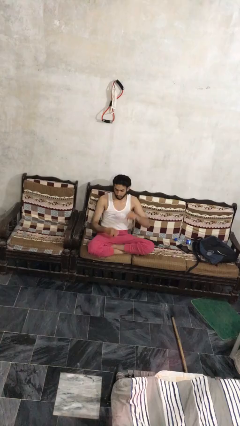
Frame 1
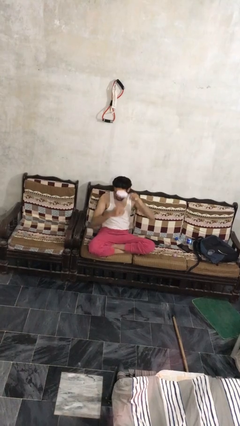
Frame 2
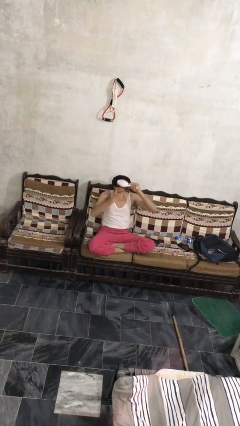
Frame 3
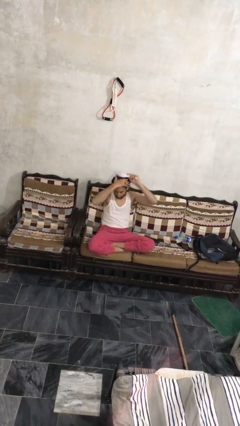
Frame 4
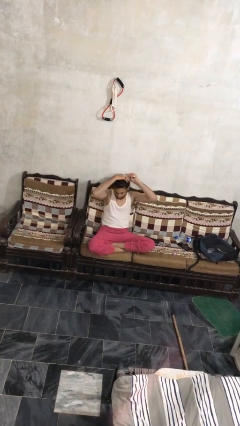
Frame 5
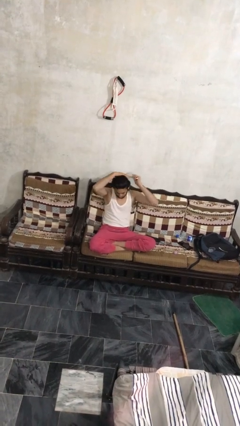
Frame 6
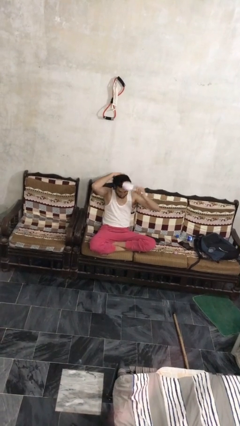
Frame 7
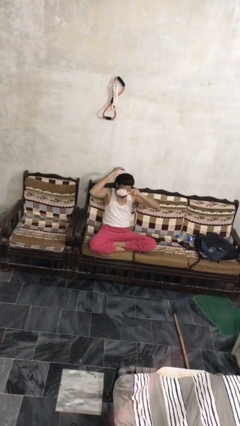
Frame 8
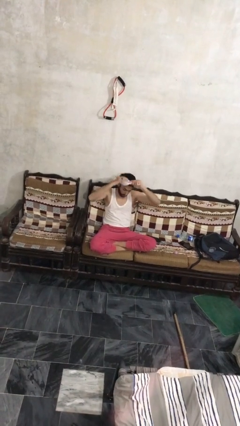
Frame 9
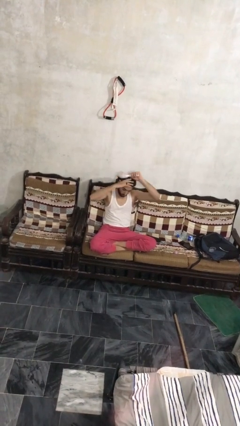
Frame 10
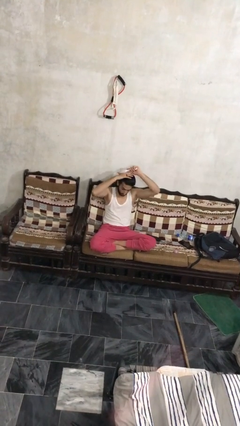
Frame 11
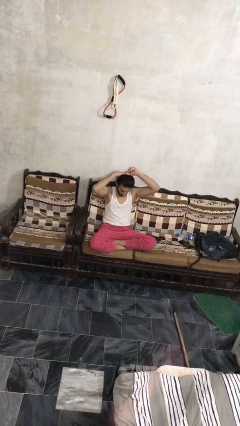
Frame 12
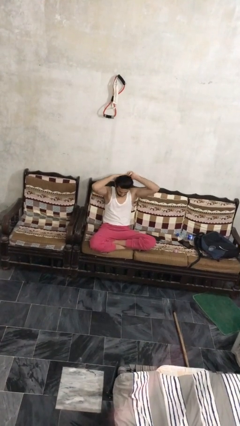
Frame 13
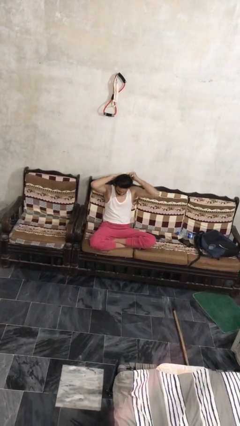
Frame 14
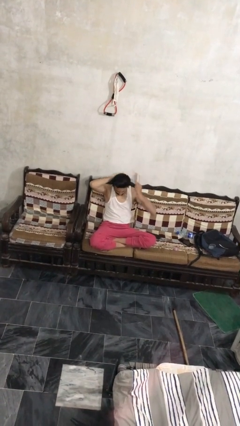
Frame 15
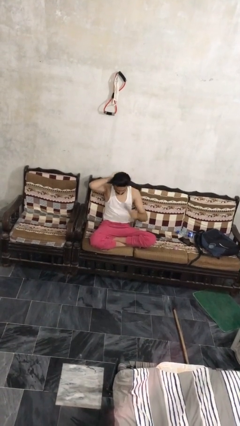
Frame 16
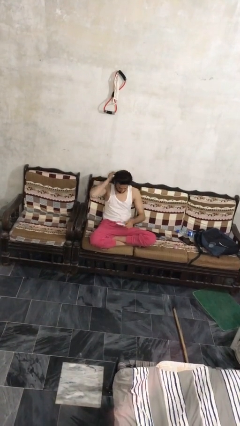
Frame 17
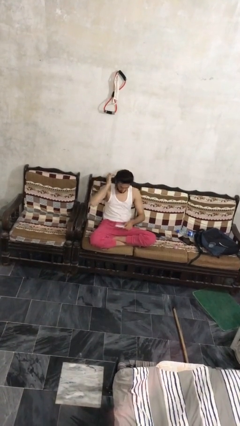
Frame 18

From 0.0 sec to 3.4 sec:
person brushes hair

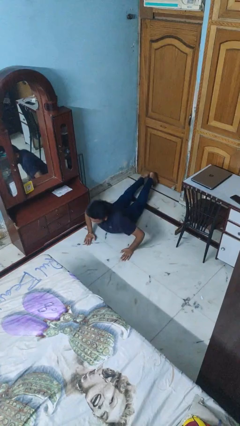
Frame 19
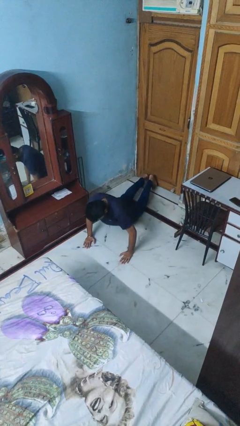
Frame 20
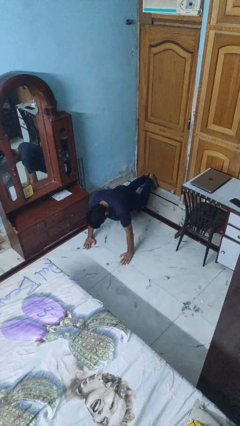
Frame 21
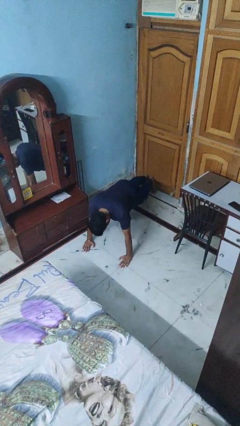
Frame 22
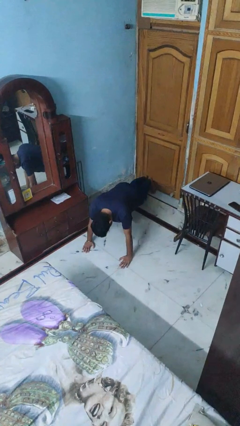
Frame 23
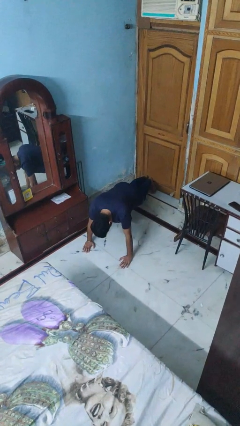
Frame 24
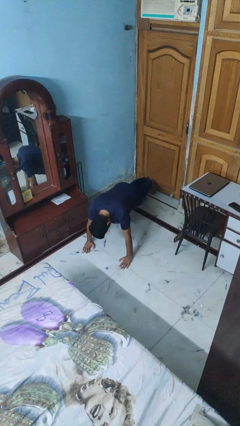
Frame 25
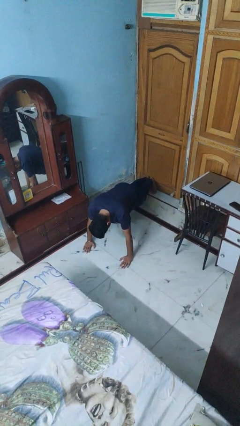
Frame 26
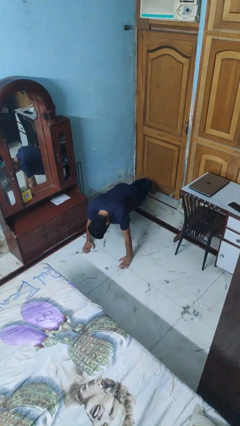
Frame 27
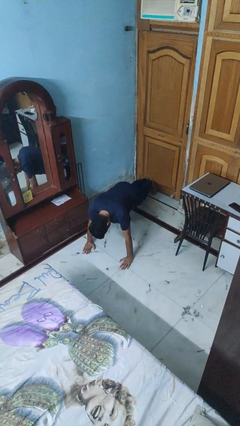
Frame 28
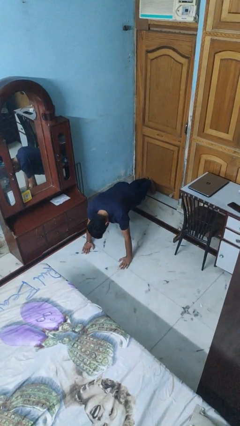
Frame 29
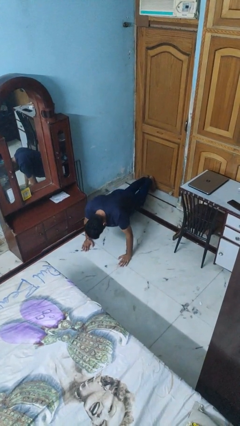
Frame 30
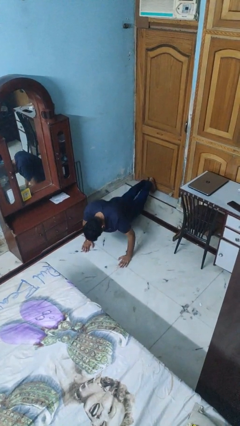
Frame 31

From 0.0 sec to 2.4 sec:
person exercises with pushup

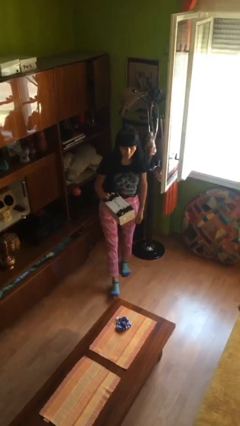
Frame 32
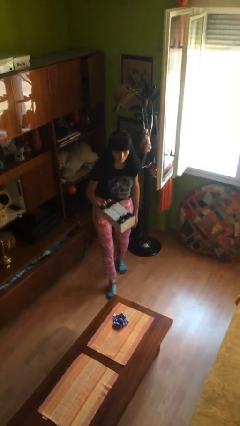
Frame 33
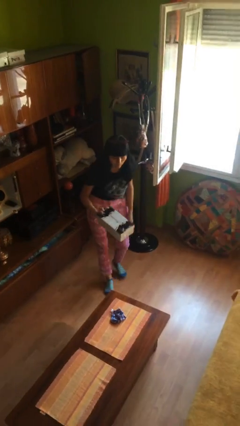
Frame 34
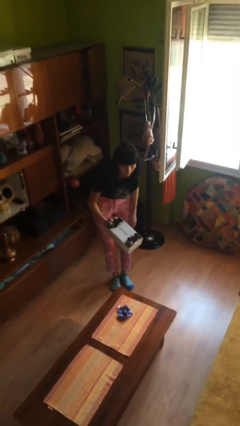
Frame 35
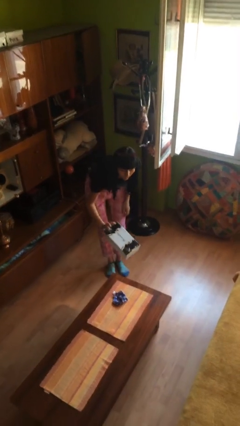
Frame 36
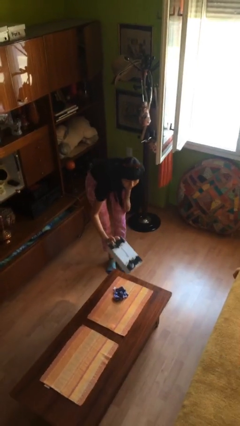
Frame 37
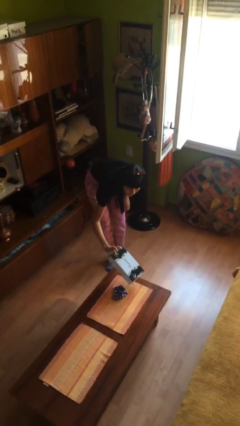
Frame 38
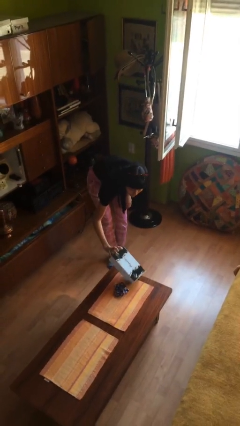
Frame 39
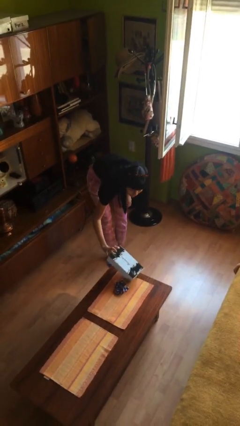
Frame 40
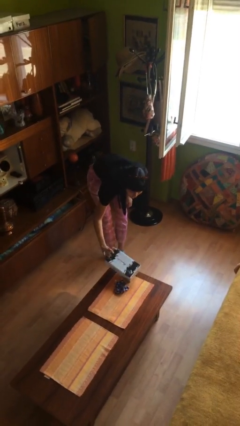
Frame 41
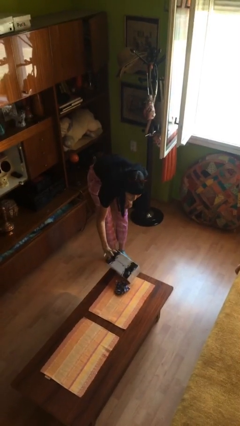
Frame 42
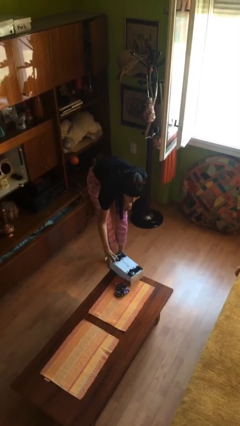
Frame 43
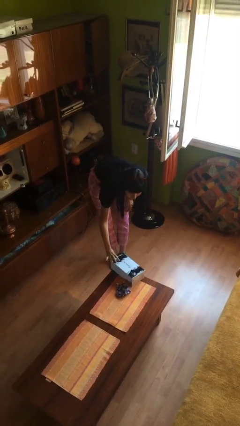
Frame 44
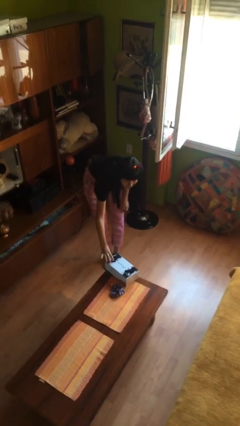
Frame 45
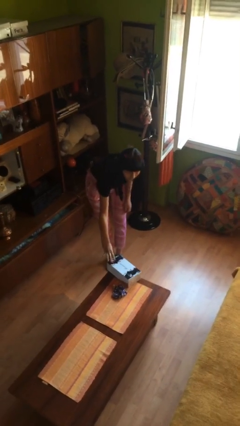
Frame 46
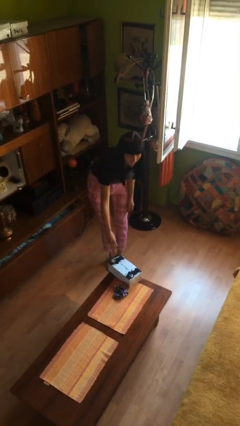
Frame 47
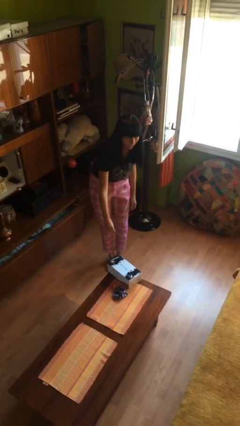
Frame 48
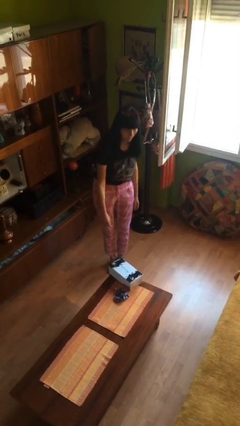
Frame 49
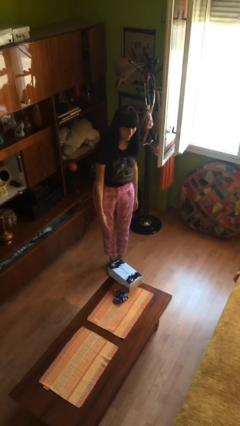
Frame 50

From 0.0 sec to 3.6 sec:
person puts down object on table

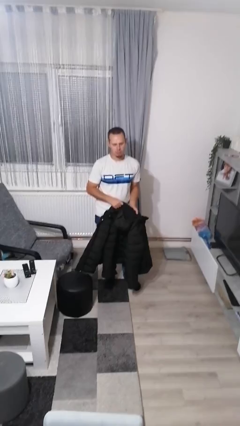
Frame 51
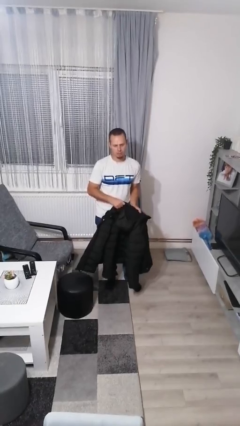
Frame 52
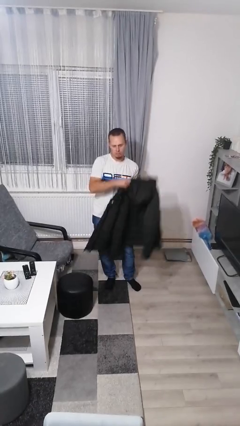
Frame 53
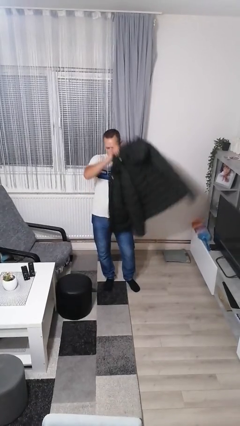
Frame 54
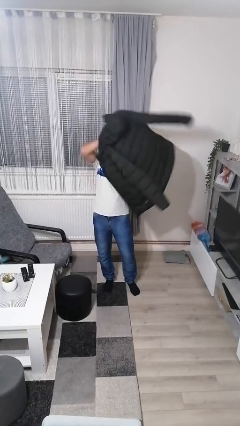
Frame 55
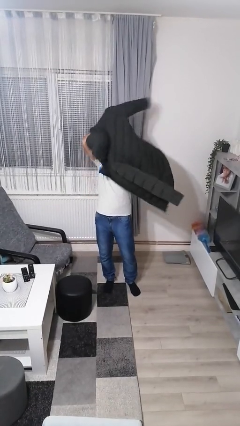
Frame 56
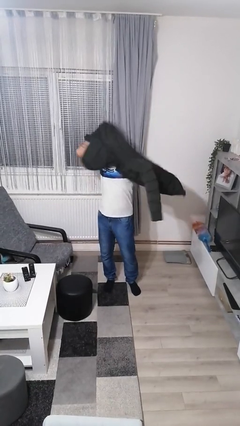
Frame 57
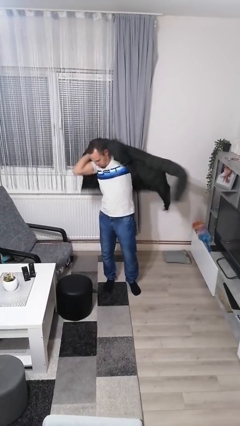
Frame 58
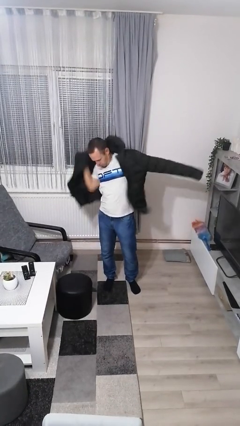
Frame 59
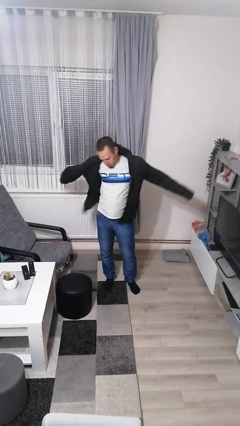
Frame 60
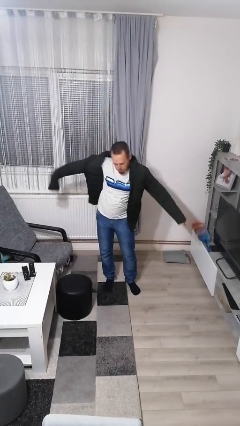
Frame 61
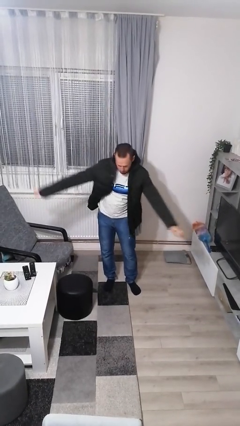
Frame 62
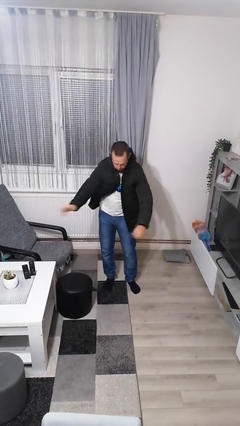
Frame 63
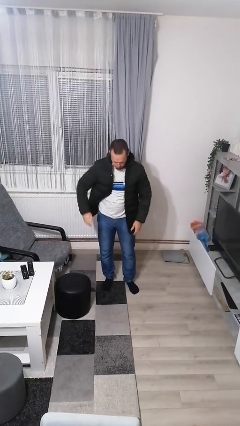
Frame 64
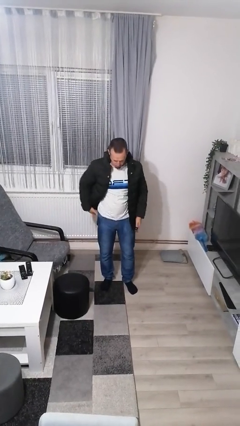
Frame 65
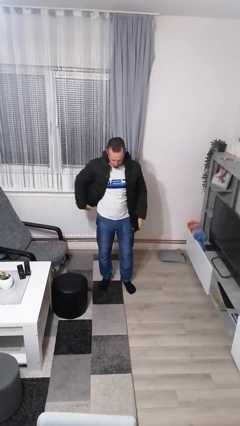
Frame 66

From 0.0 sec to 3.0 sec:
person puts on jacket

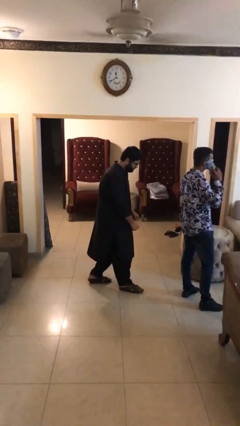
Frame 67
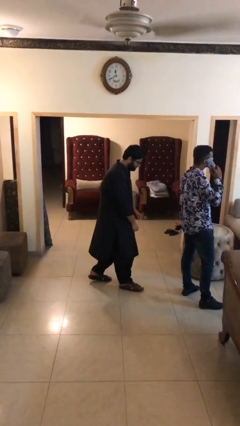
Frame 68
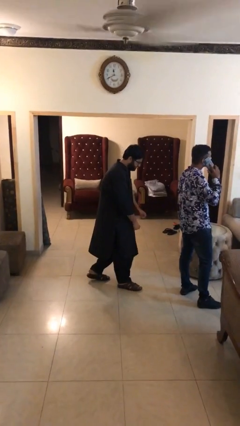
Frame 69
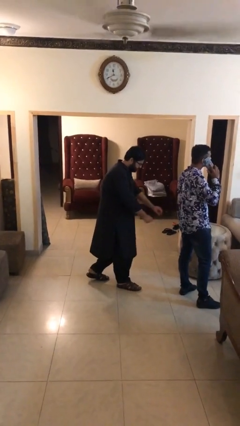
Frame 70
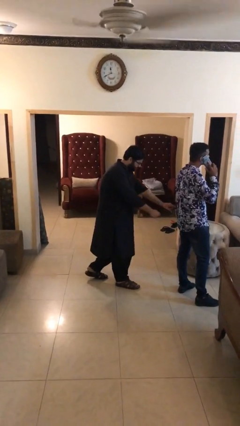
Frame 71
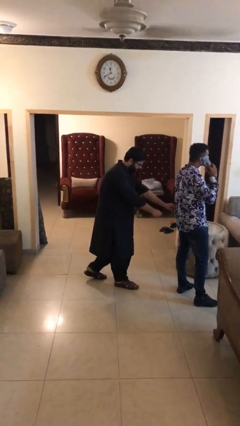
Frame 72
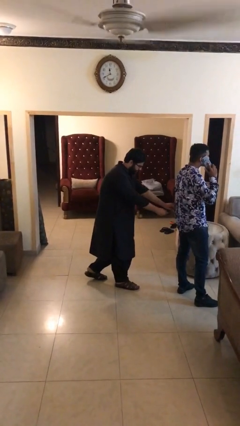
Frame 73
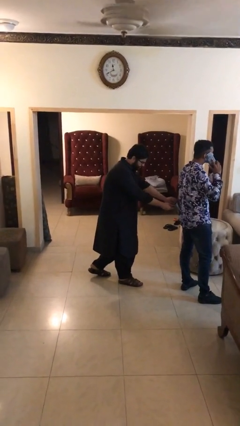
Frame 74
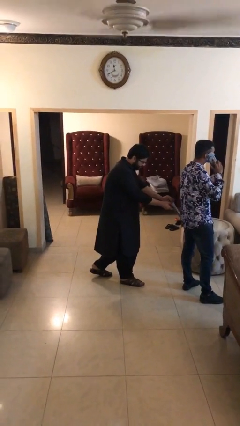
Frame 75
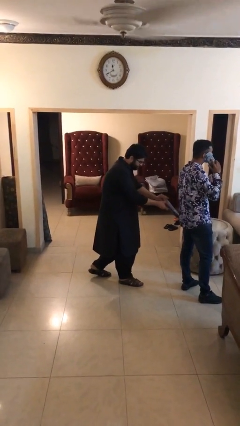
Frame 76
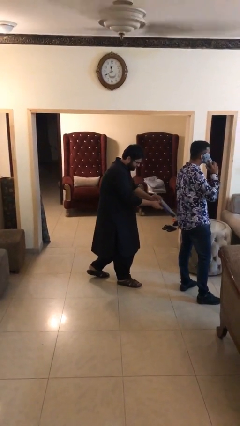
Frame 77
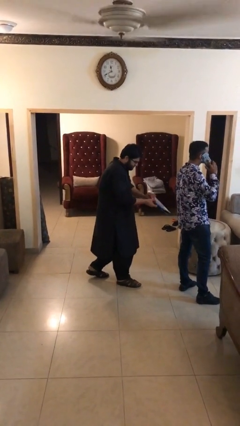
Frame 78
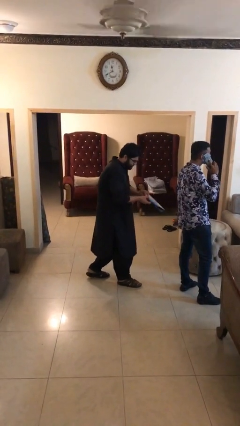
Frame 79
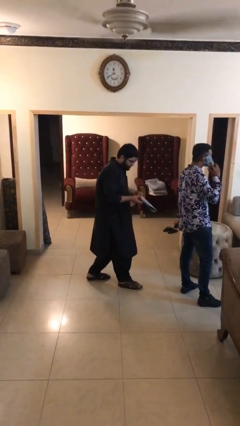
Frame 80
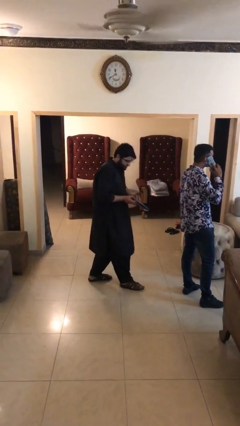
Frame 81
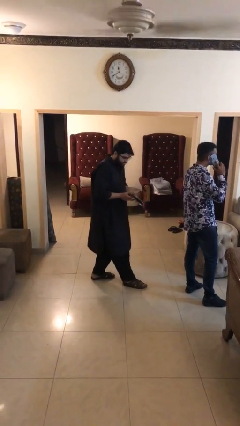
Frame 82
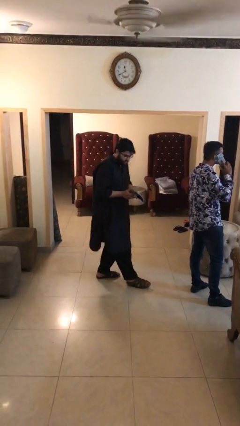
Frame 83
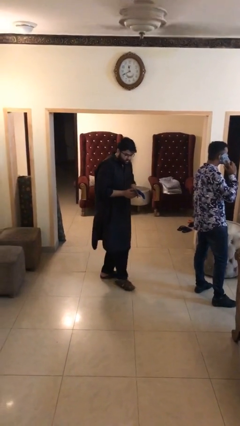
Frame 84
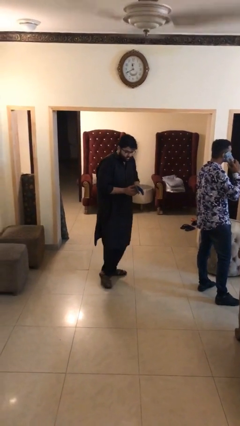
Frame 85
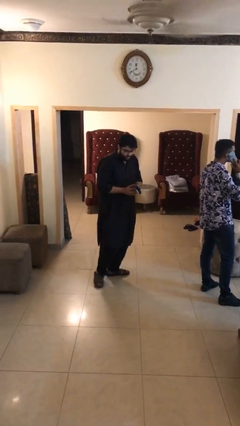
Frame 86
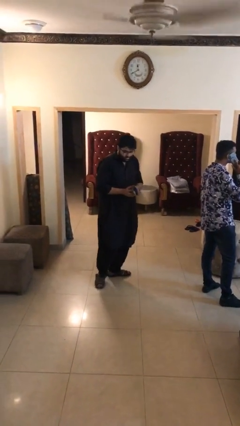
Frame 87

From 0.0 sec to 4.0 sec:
person steals object from person

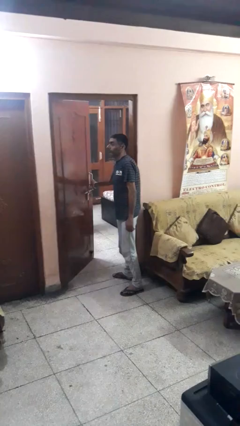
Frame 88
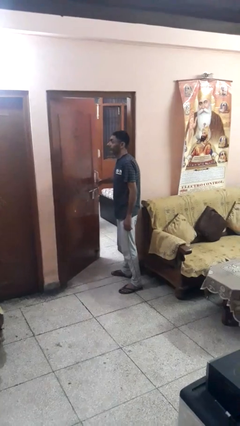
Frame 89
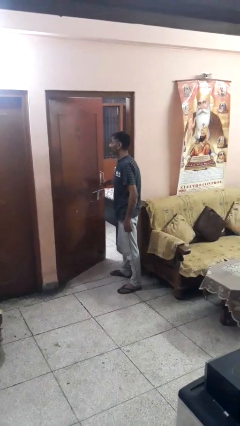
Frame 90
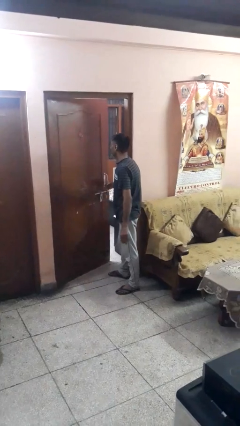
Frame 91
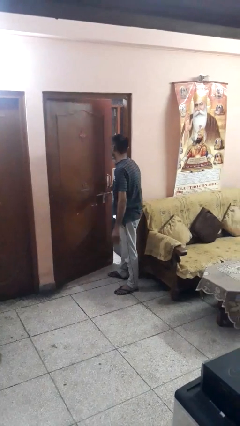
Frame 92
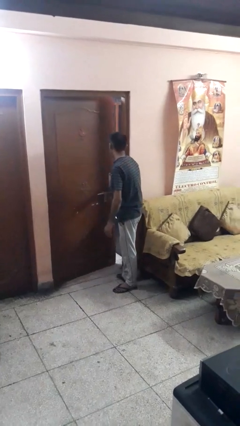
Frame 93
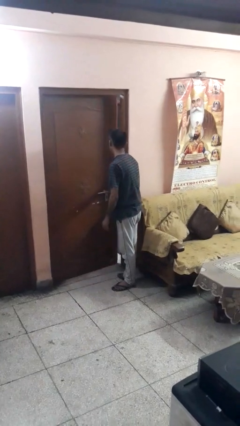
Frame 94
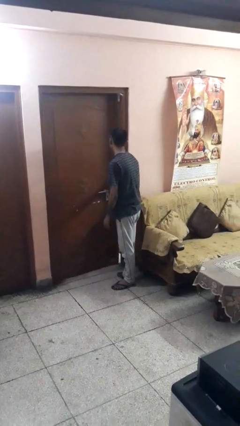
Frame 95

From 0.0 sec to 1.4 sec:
person closes facility door
